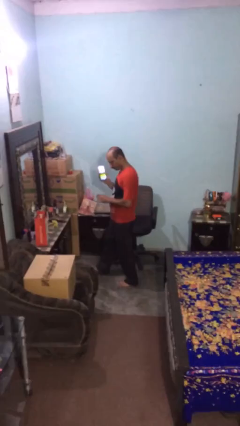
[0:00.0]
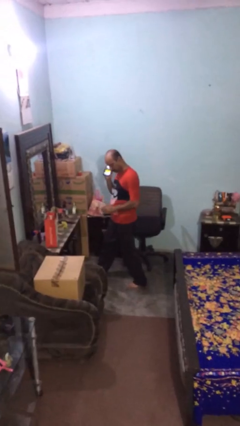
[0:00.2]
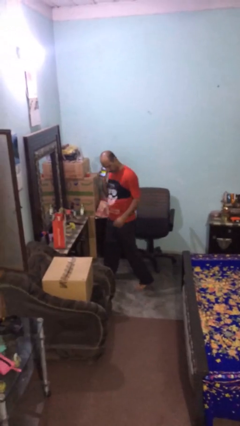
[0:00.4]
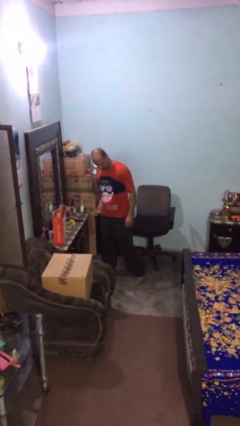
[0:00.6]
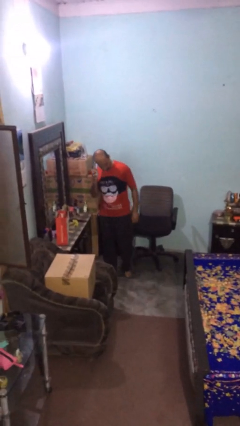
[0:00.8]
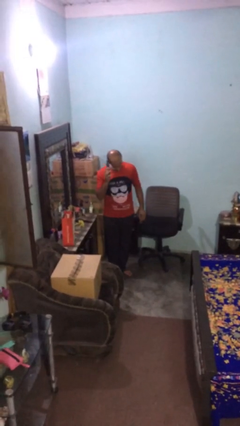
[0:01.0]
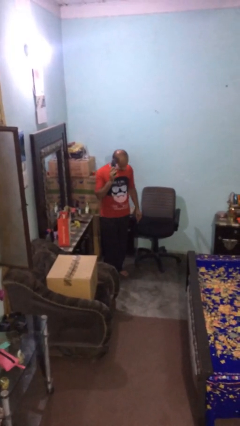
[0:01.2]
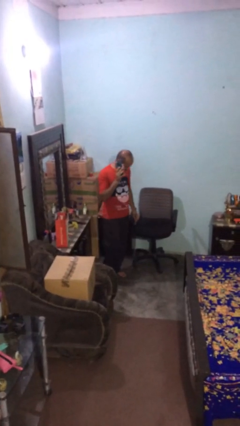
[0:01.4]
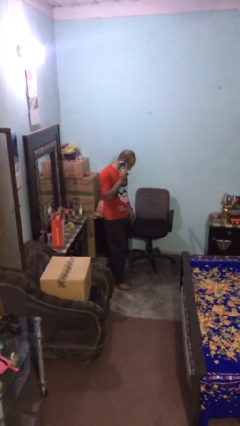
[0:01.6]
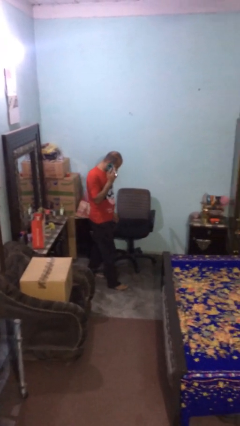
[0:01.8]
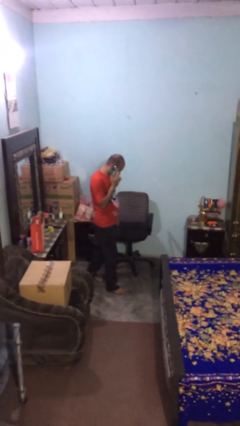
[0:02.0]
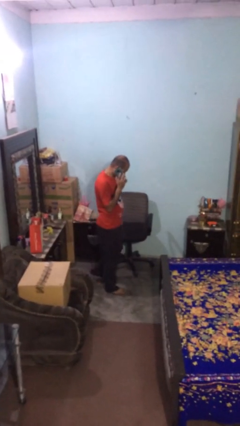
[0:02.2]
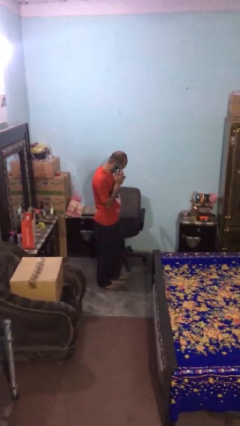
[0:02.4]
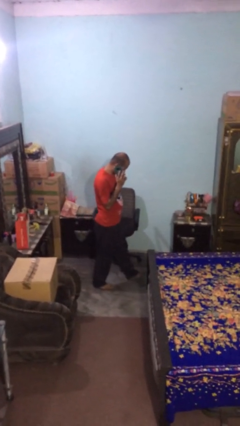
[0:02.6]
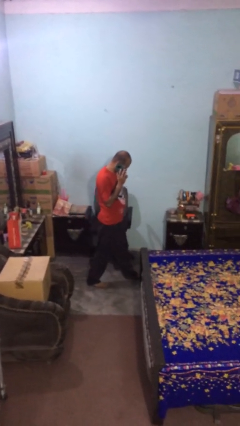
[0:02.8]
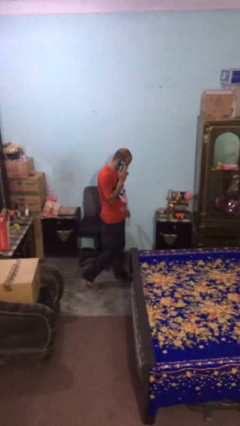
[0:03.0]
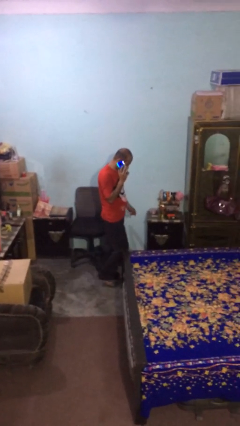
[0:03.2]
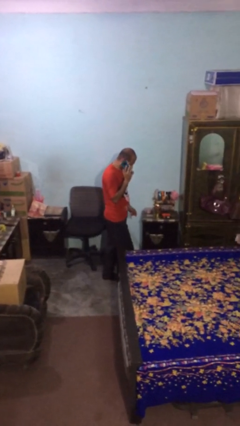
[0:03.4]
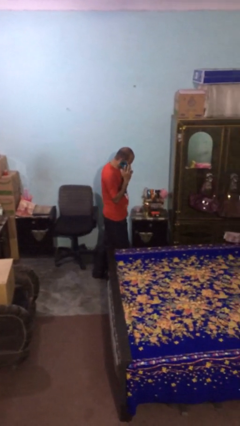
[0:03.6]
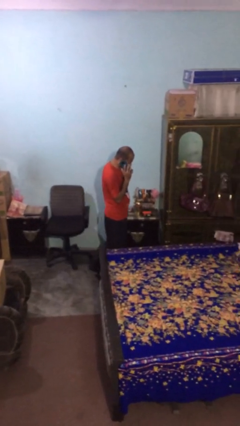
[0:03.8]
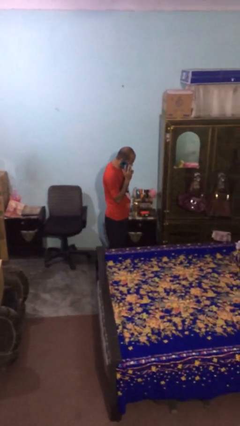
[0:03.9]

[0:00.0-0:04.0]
person talks on phone

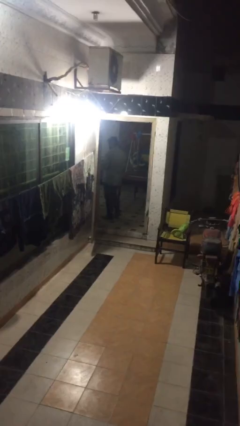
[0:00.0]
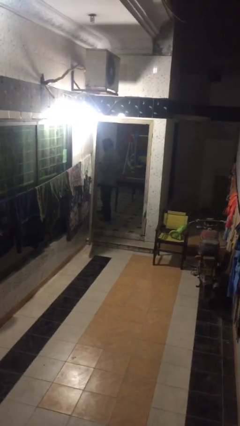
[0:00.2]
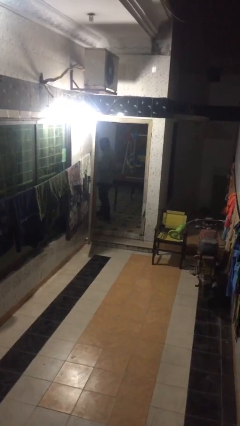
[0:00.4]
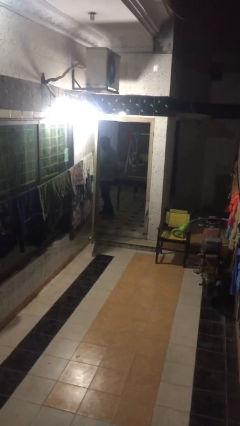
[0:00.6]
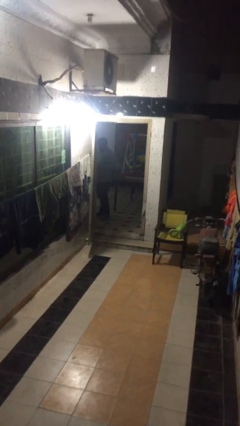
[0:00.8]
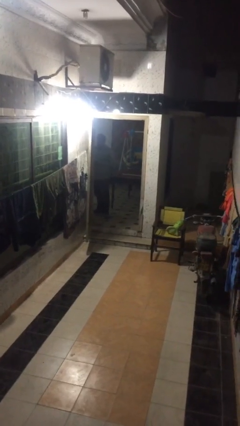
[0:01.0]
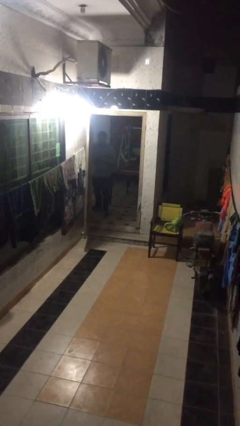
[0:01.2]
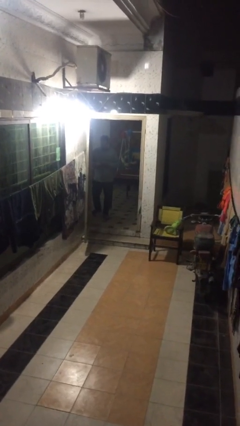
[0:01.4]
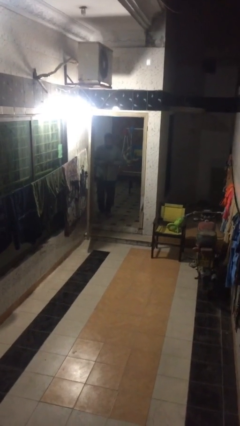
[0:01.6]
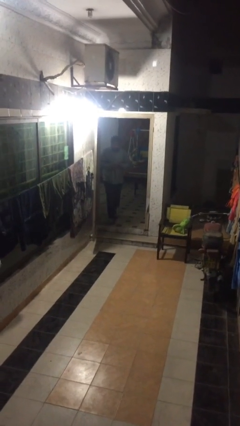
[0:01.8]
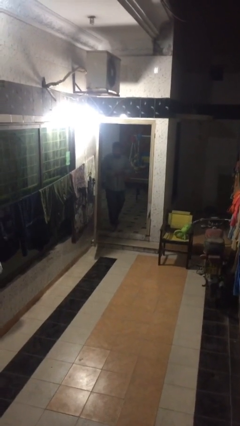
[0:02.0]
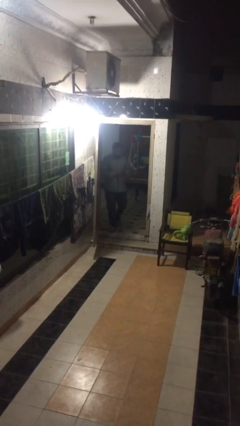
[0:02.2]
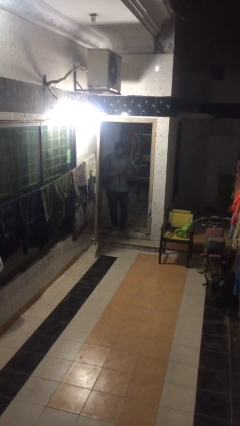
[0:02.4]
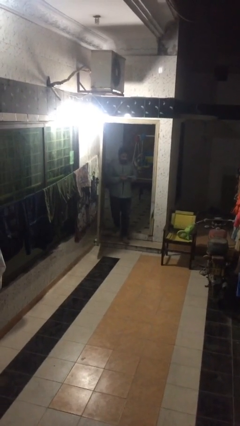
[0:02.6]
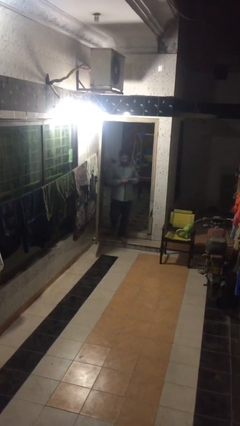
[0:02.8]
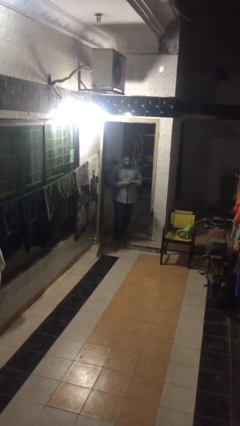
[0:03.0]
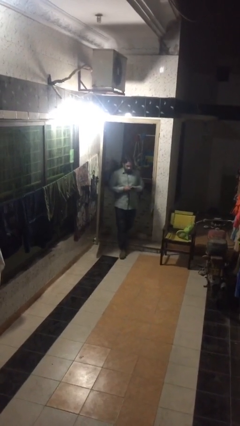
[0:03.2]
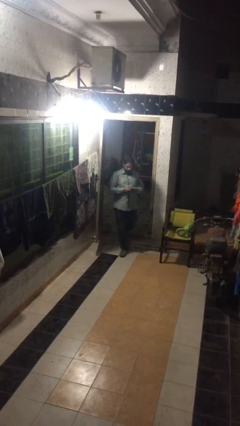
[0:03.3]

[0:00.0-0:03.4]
person enters scene through structure

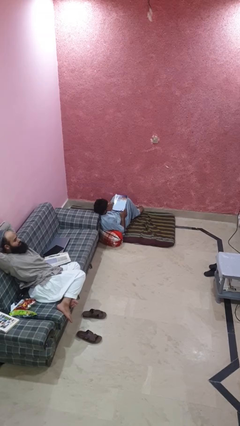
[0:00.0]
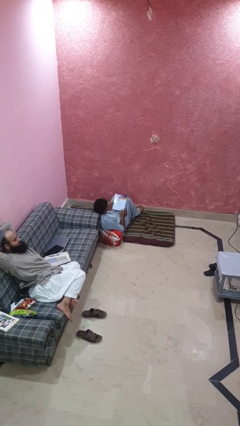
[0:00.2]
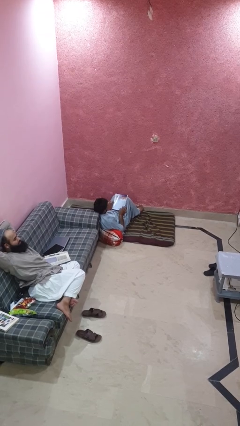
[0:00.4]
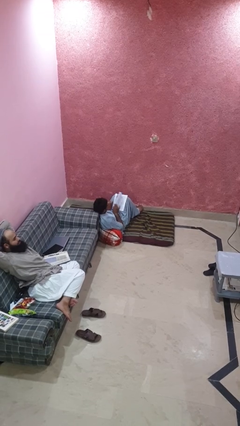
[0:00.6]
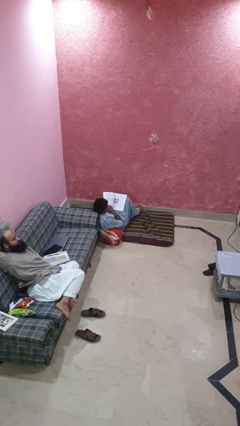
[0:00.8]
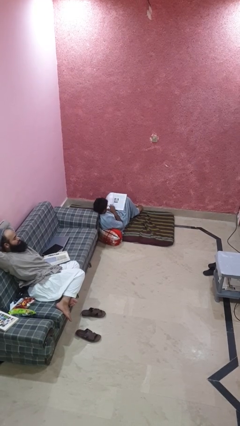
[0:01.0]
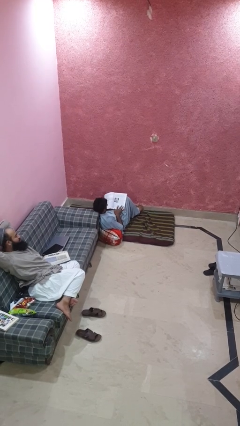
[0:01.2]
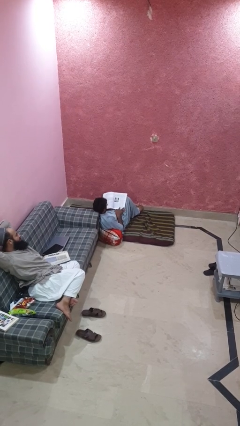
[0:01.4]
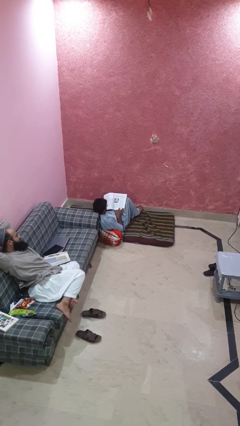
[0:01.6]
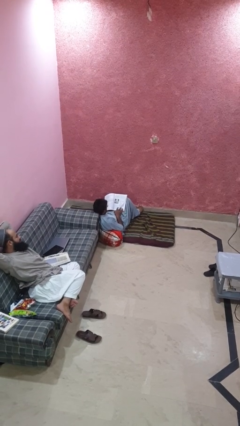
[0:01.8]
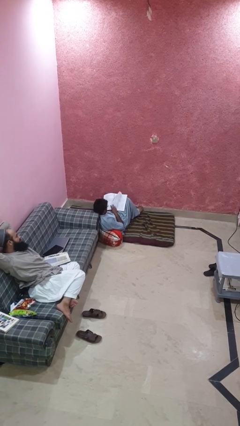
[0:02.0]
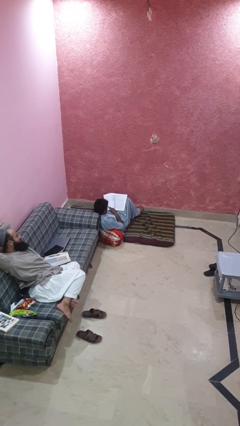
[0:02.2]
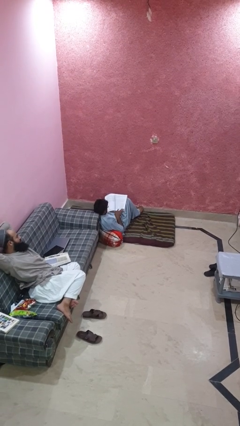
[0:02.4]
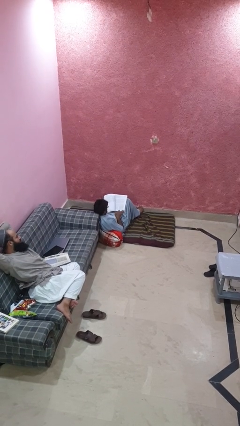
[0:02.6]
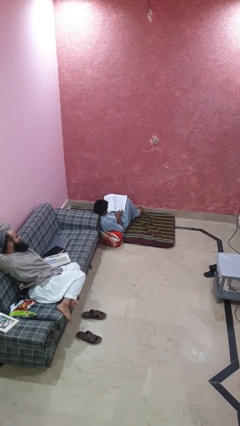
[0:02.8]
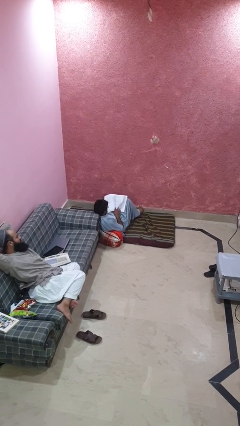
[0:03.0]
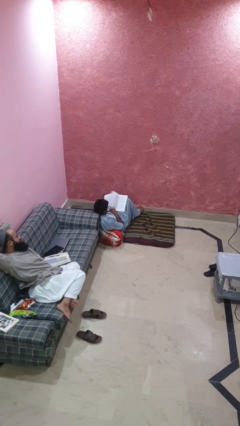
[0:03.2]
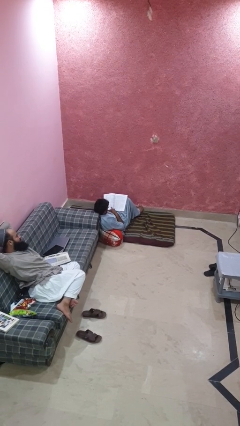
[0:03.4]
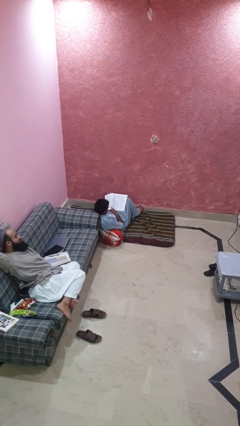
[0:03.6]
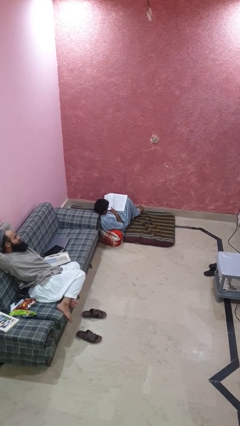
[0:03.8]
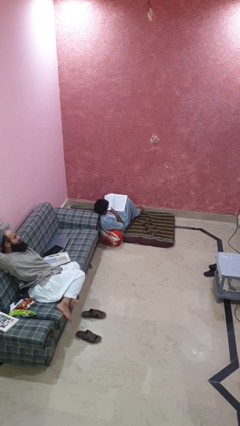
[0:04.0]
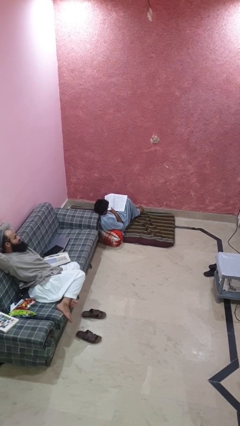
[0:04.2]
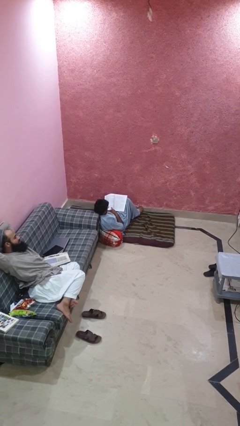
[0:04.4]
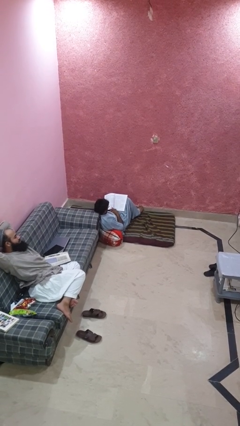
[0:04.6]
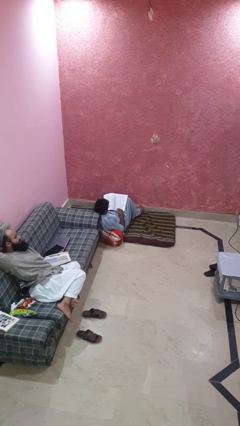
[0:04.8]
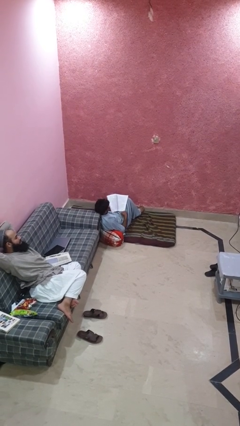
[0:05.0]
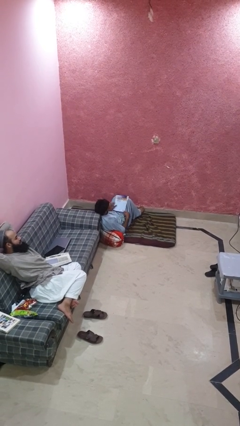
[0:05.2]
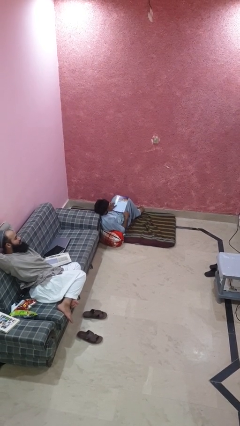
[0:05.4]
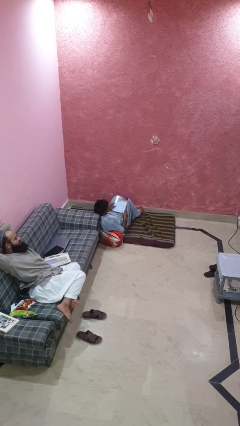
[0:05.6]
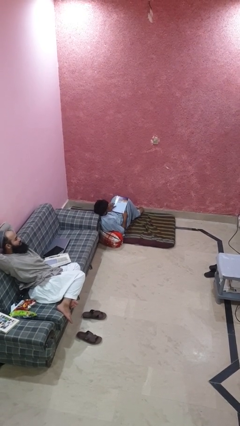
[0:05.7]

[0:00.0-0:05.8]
person reads magazine

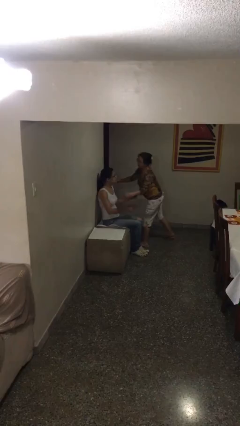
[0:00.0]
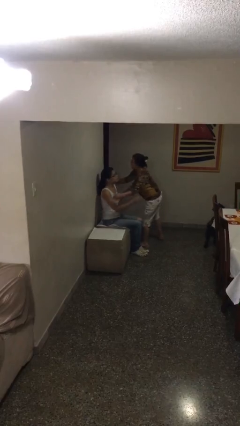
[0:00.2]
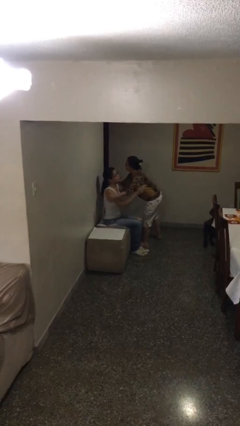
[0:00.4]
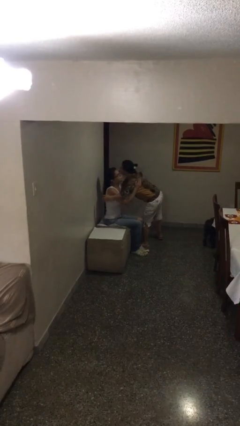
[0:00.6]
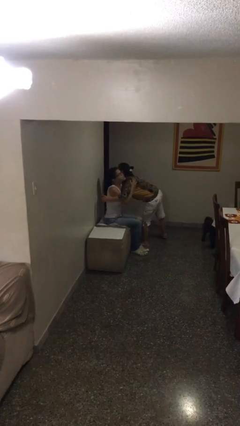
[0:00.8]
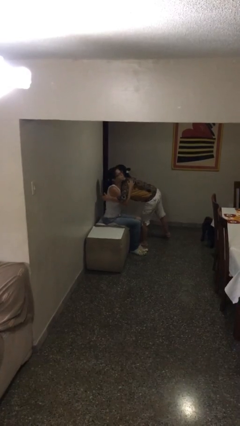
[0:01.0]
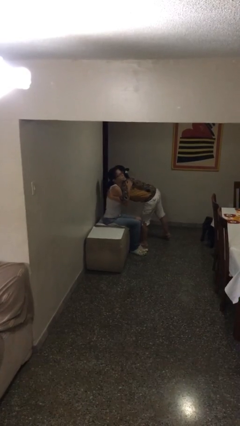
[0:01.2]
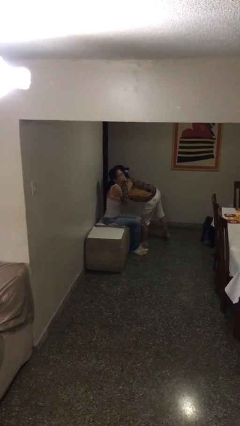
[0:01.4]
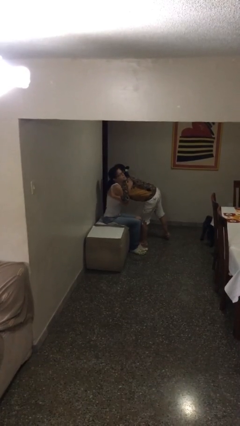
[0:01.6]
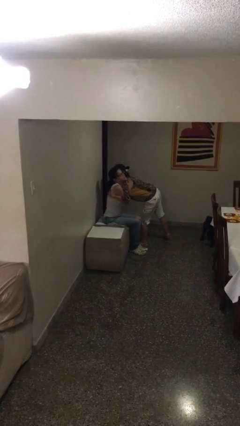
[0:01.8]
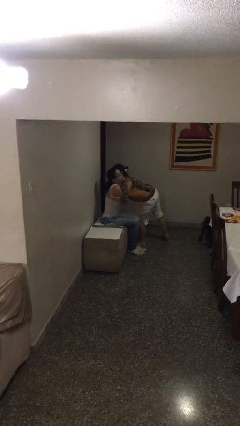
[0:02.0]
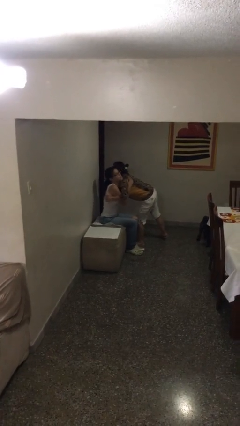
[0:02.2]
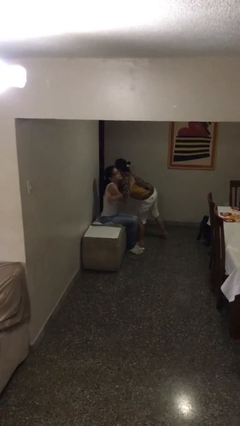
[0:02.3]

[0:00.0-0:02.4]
person embraces person

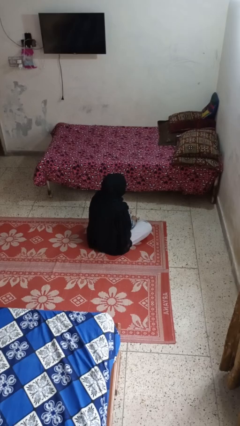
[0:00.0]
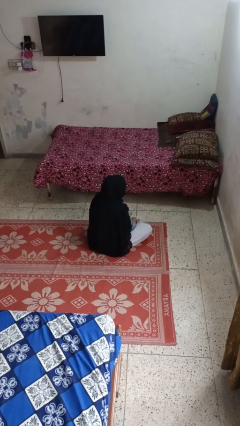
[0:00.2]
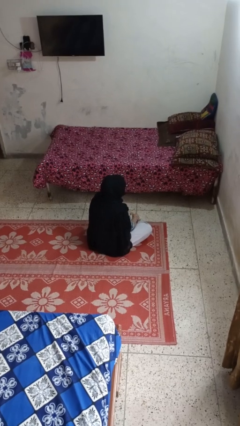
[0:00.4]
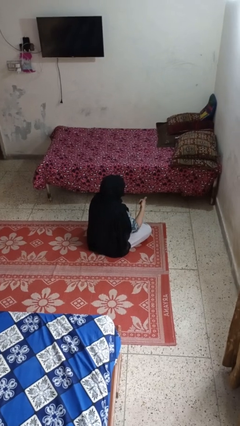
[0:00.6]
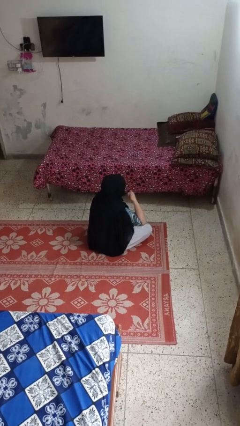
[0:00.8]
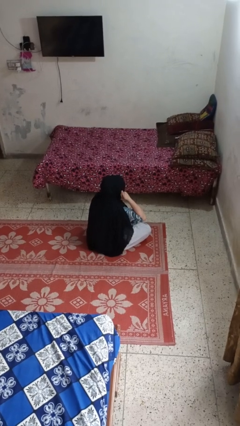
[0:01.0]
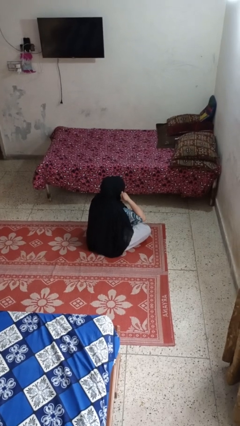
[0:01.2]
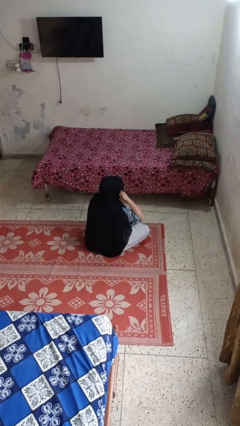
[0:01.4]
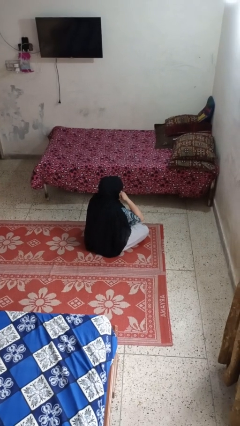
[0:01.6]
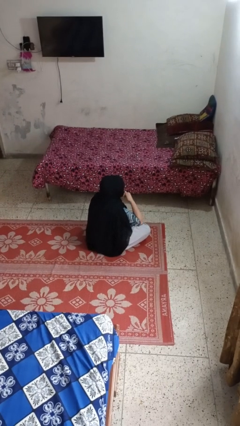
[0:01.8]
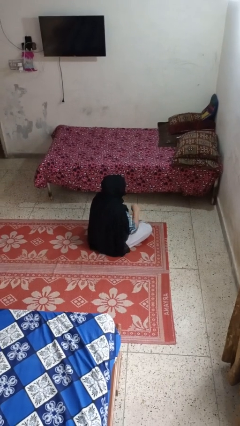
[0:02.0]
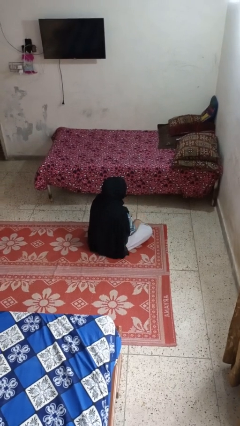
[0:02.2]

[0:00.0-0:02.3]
person gestures call me
